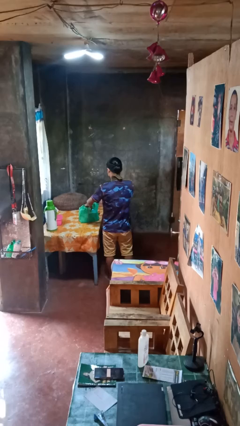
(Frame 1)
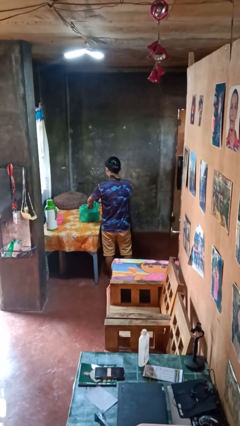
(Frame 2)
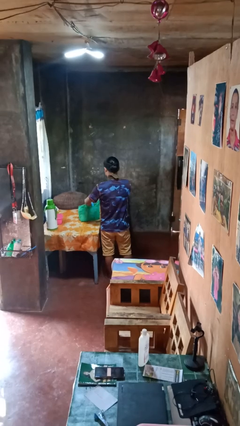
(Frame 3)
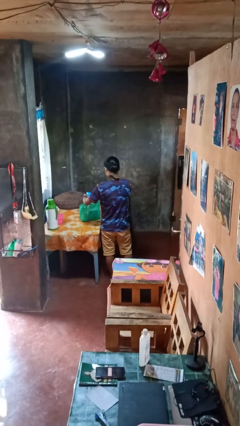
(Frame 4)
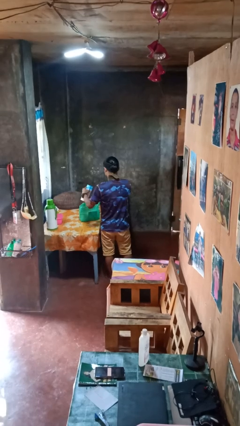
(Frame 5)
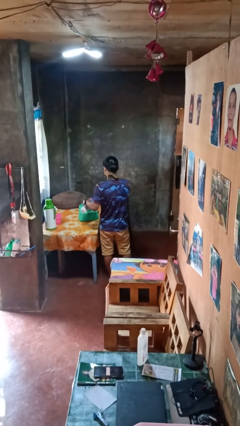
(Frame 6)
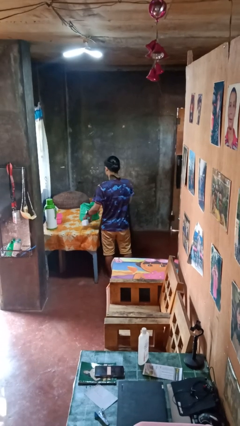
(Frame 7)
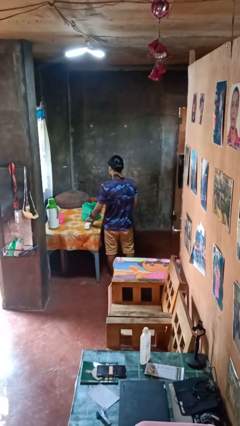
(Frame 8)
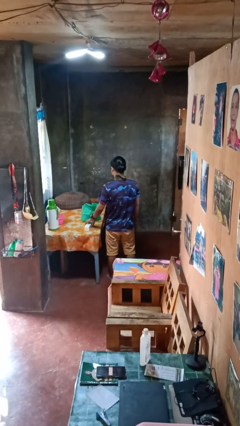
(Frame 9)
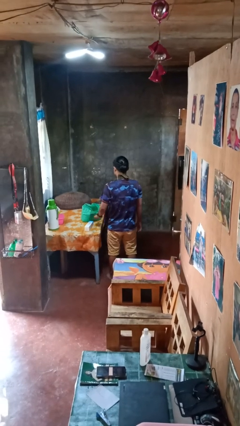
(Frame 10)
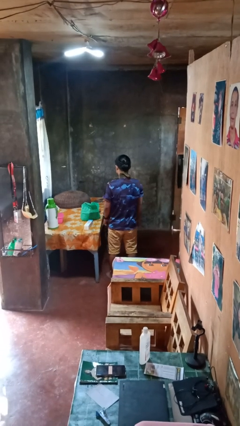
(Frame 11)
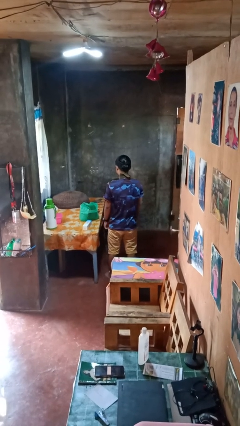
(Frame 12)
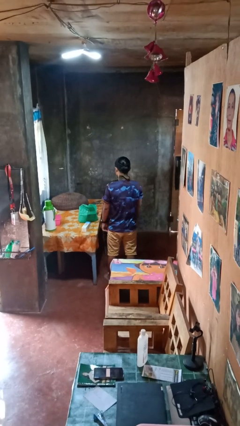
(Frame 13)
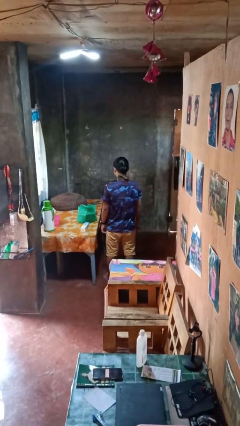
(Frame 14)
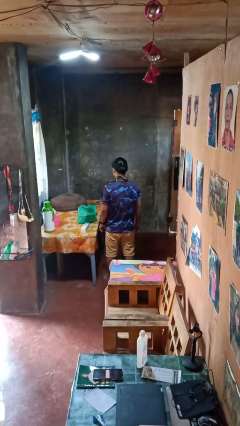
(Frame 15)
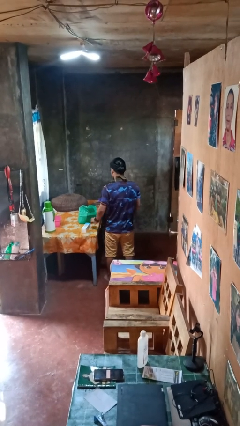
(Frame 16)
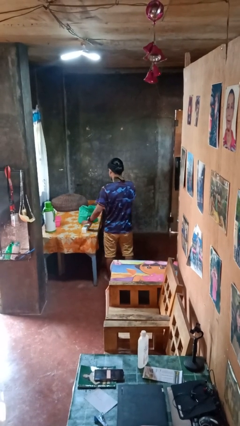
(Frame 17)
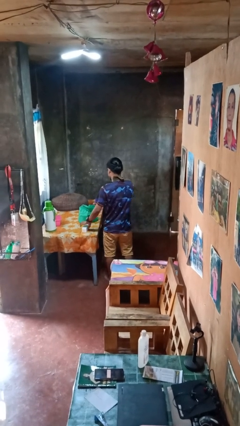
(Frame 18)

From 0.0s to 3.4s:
person takes object from bag

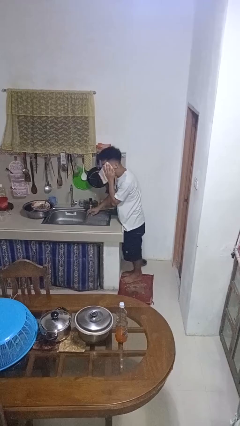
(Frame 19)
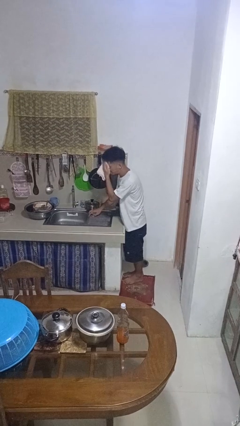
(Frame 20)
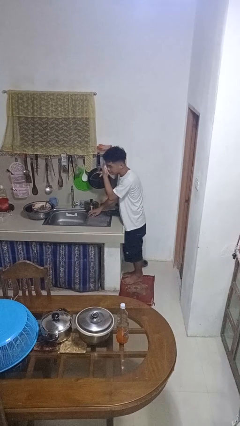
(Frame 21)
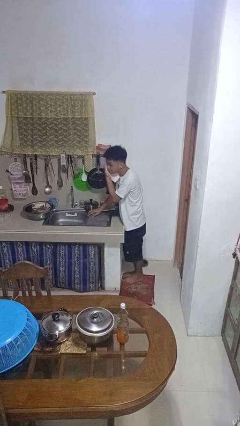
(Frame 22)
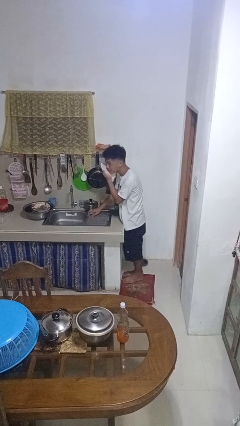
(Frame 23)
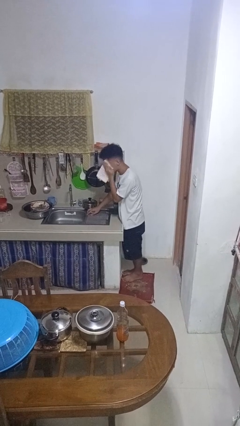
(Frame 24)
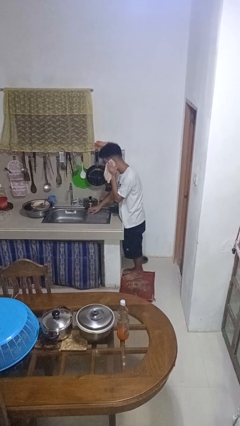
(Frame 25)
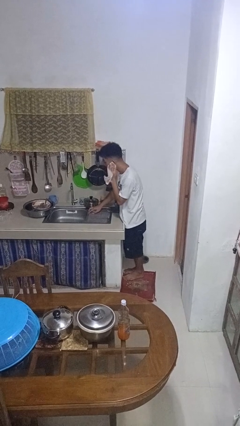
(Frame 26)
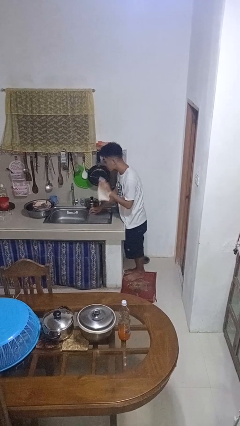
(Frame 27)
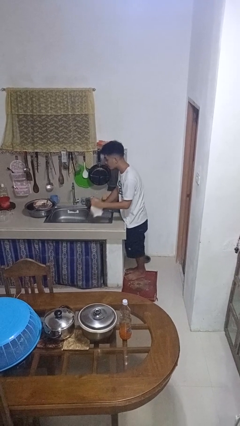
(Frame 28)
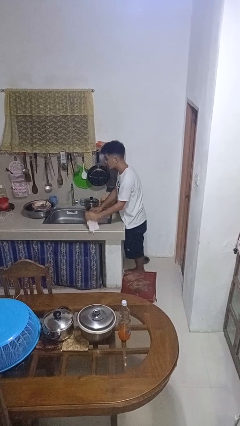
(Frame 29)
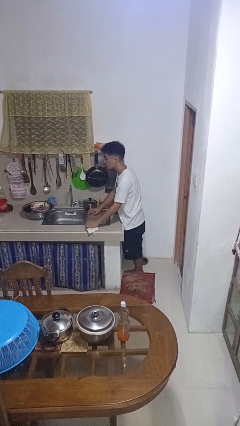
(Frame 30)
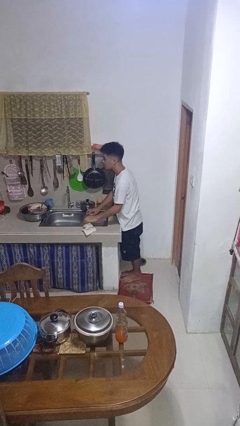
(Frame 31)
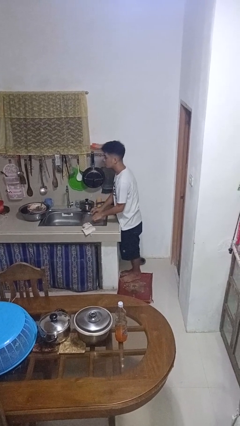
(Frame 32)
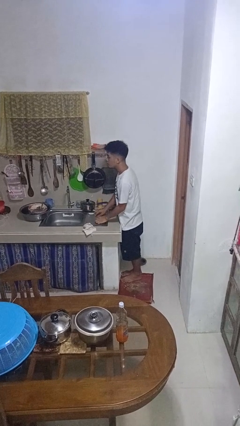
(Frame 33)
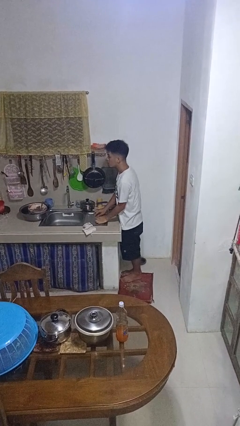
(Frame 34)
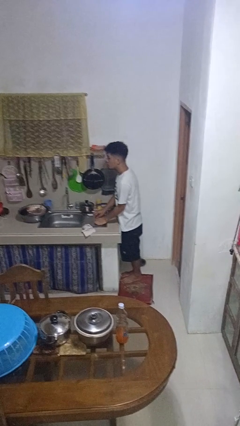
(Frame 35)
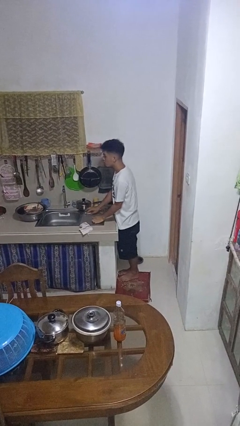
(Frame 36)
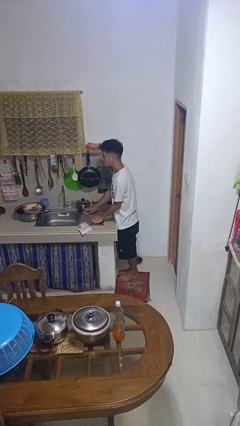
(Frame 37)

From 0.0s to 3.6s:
person dries face with towel

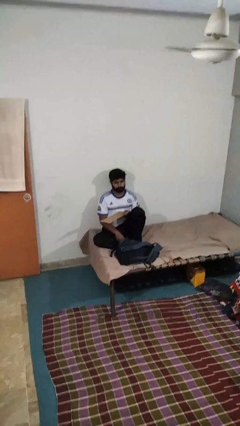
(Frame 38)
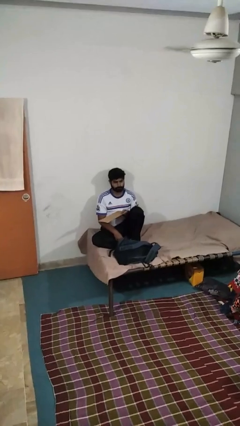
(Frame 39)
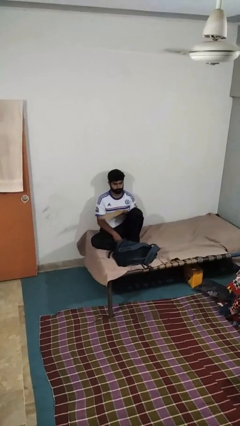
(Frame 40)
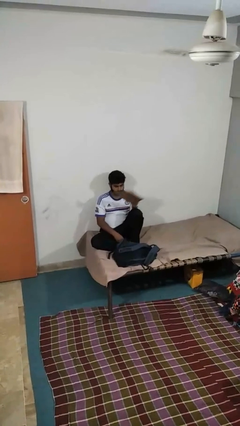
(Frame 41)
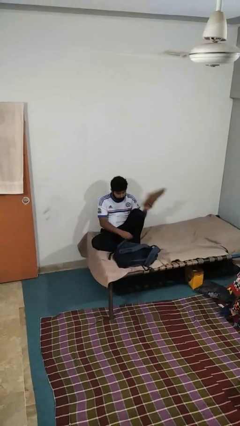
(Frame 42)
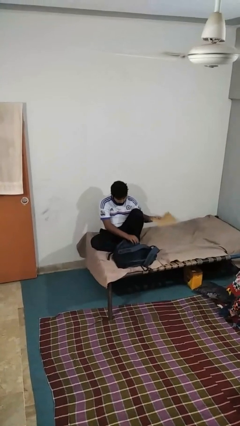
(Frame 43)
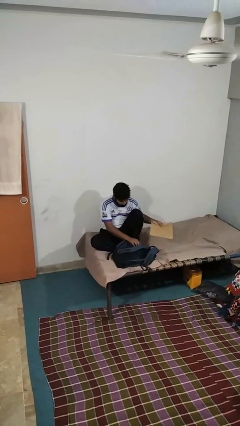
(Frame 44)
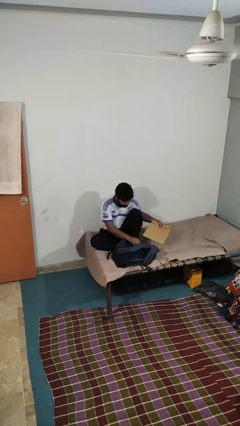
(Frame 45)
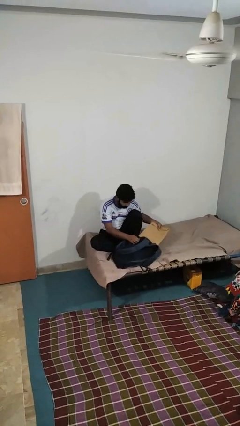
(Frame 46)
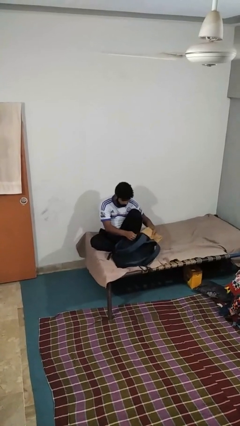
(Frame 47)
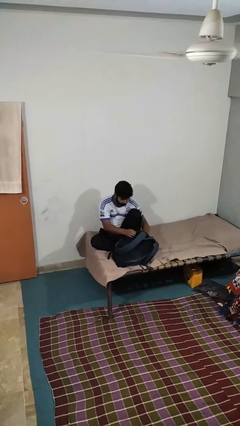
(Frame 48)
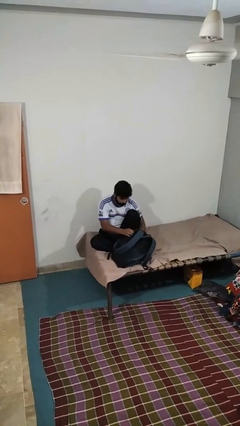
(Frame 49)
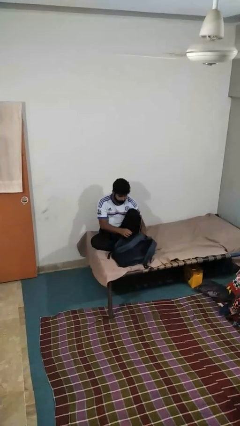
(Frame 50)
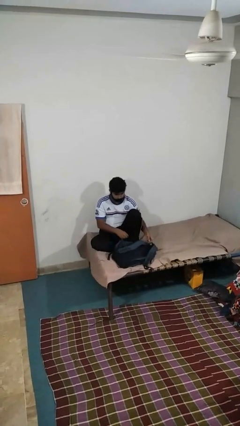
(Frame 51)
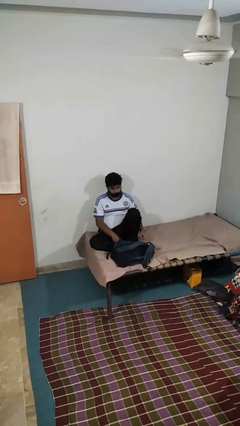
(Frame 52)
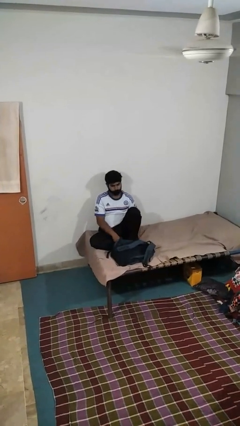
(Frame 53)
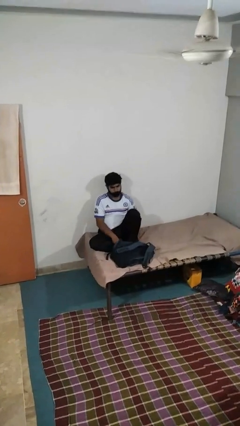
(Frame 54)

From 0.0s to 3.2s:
person puts object into backpack

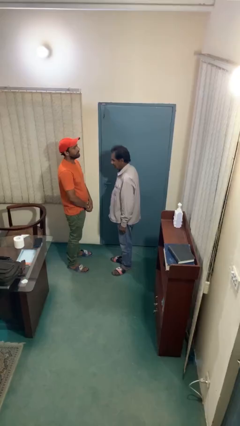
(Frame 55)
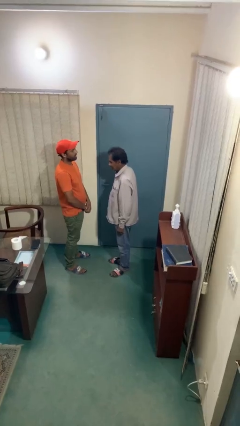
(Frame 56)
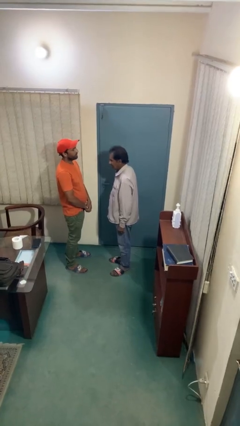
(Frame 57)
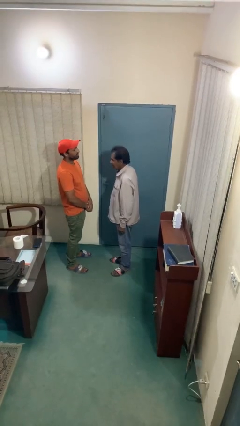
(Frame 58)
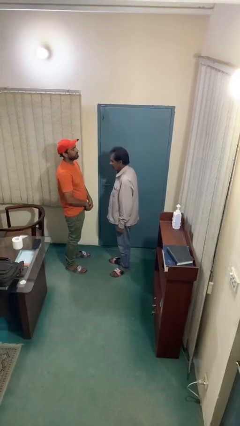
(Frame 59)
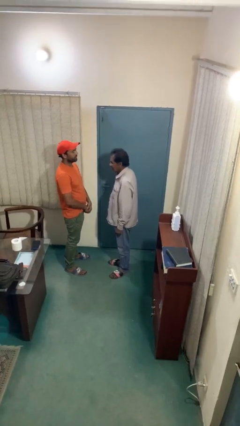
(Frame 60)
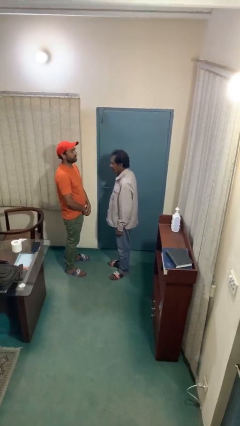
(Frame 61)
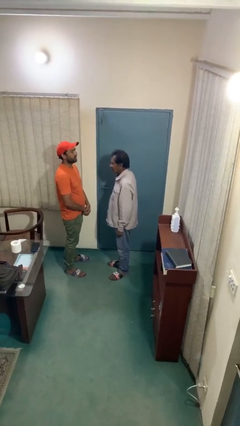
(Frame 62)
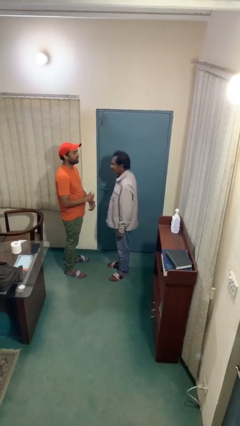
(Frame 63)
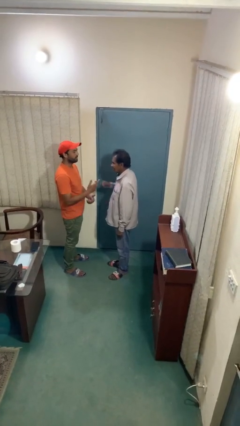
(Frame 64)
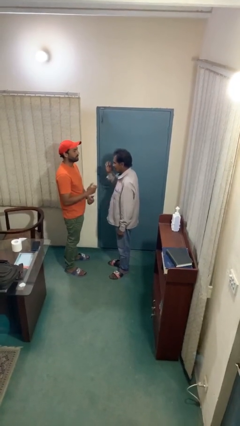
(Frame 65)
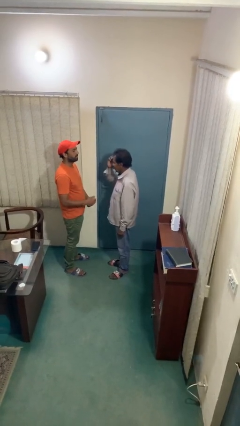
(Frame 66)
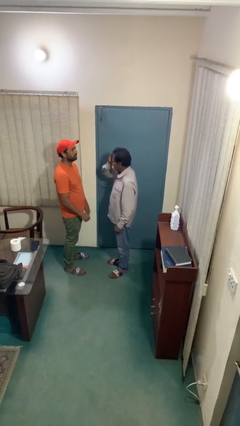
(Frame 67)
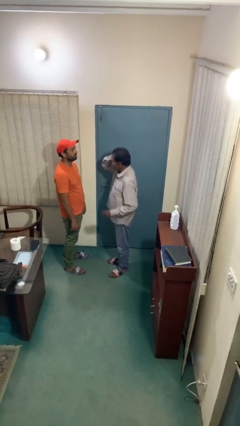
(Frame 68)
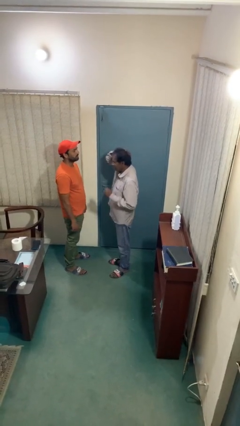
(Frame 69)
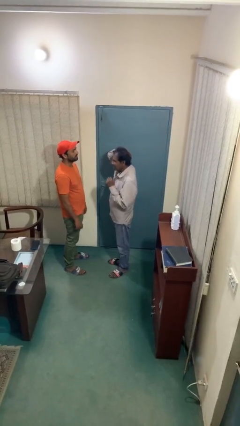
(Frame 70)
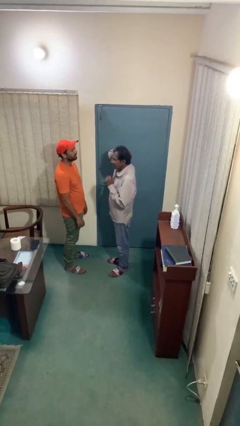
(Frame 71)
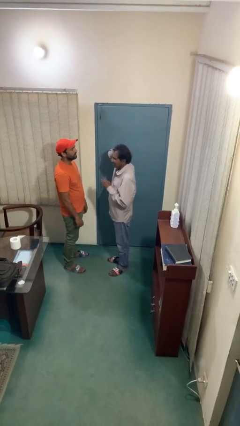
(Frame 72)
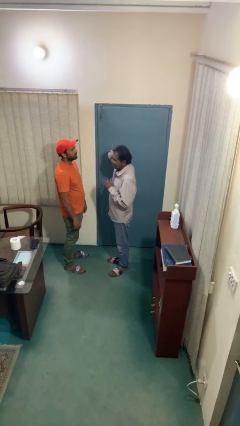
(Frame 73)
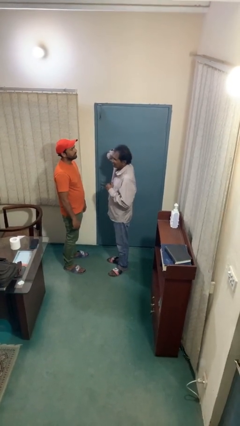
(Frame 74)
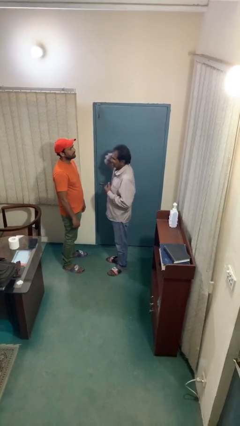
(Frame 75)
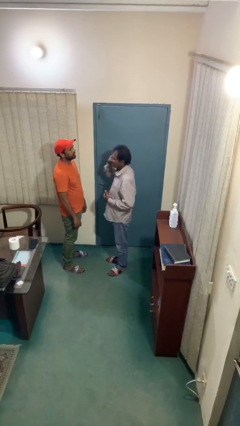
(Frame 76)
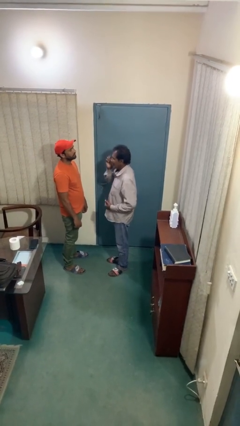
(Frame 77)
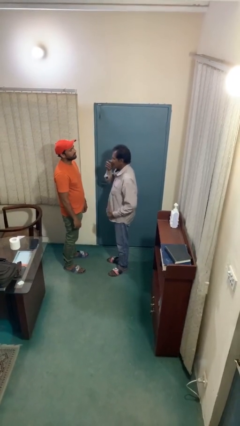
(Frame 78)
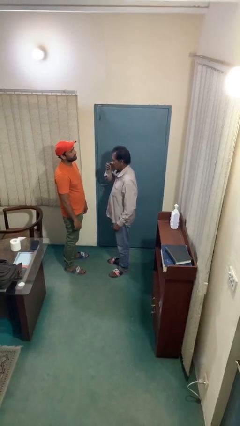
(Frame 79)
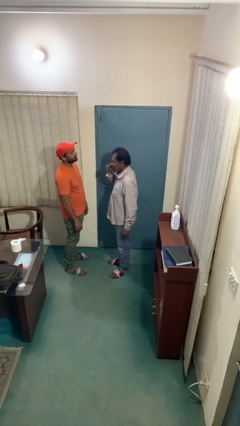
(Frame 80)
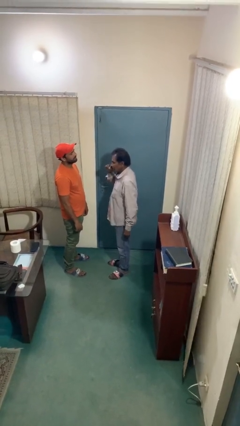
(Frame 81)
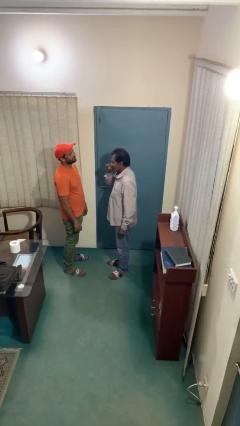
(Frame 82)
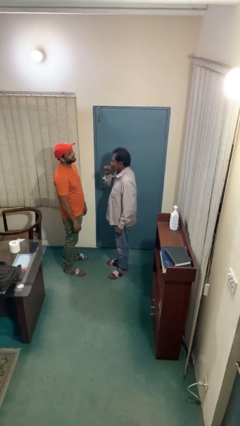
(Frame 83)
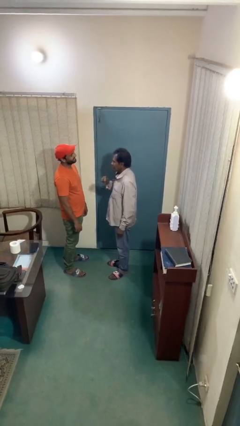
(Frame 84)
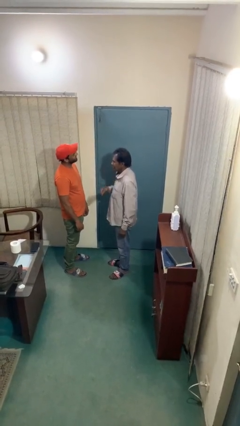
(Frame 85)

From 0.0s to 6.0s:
person talks to person

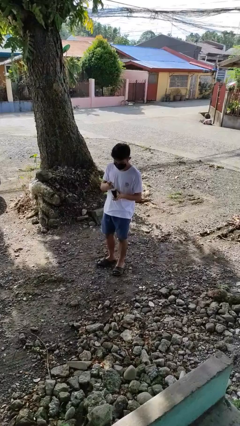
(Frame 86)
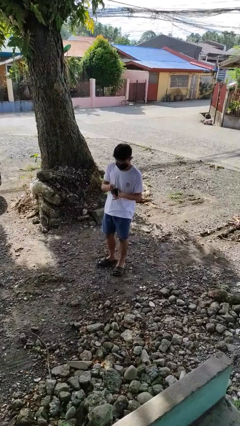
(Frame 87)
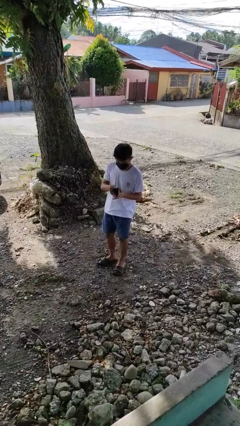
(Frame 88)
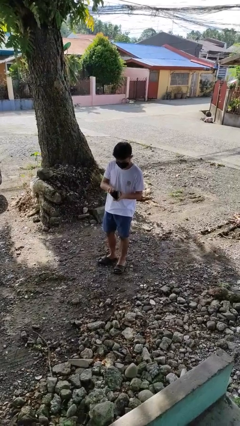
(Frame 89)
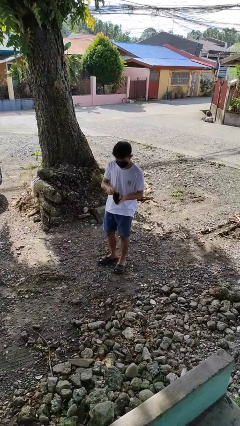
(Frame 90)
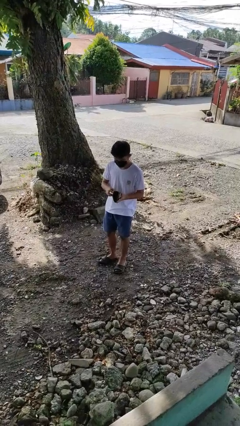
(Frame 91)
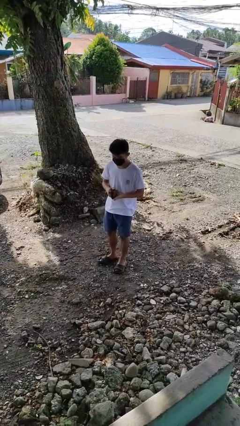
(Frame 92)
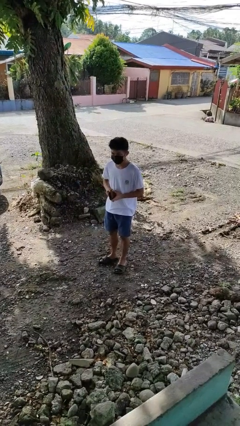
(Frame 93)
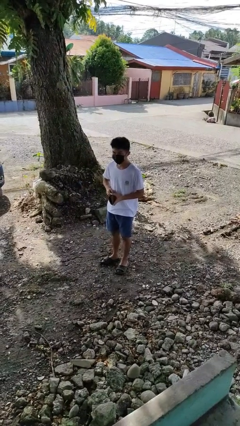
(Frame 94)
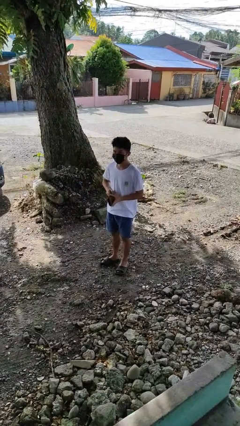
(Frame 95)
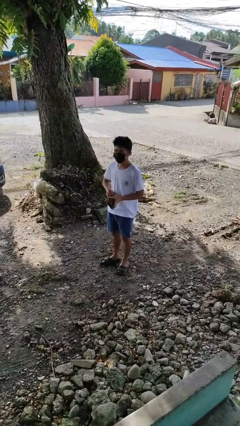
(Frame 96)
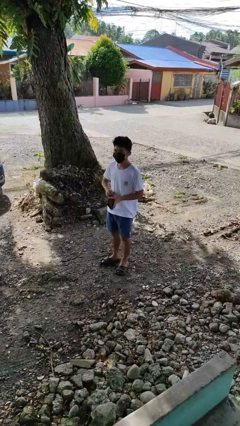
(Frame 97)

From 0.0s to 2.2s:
person puts object into purse
